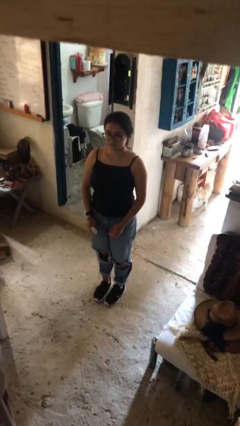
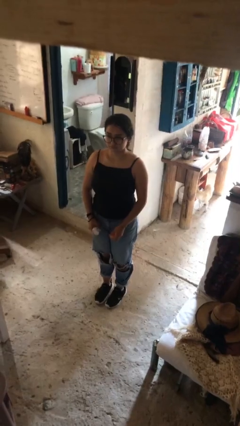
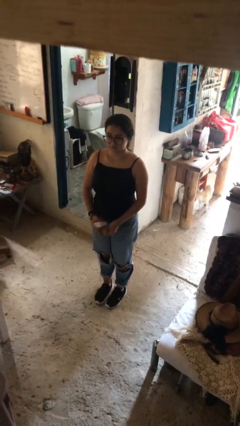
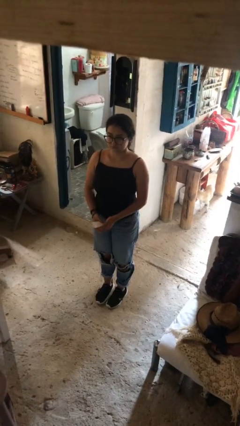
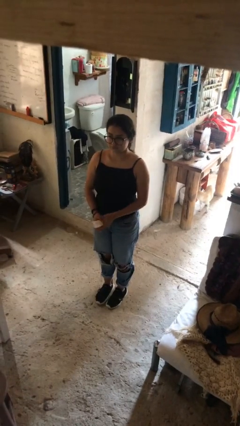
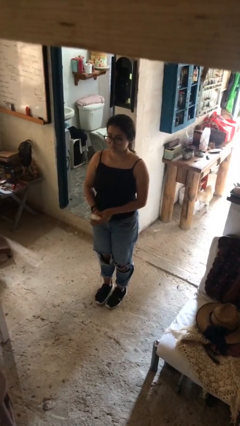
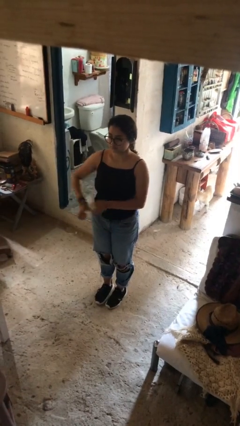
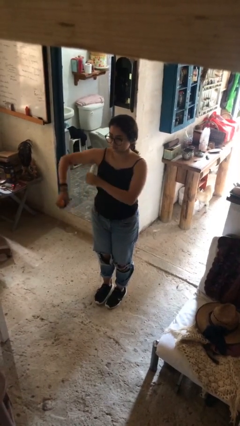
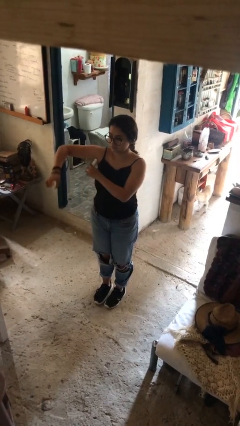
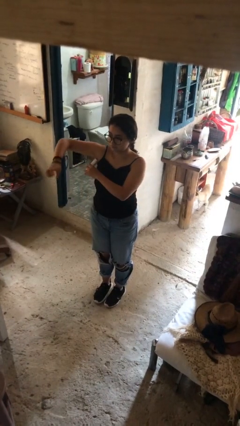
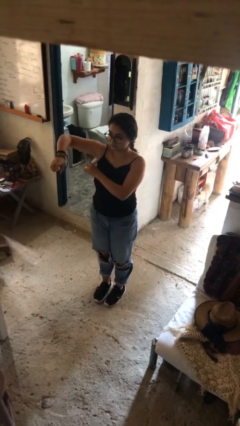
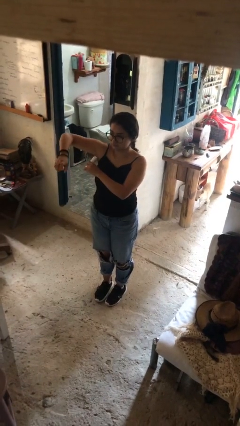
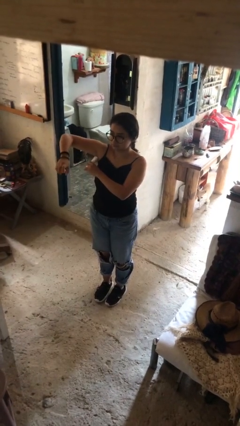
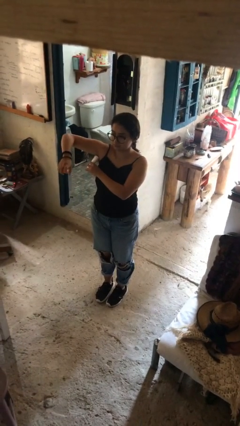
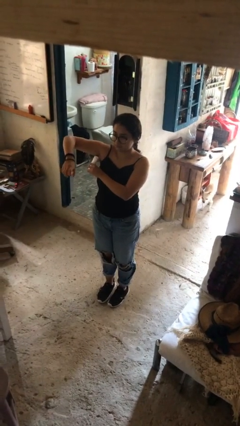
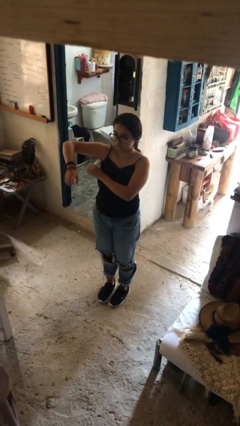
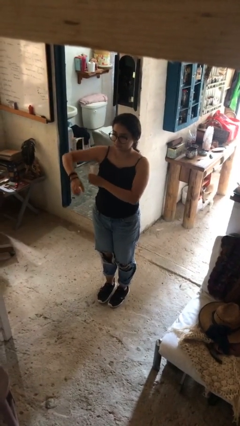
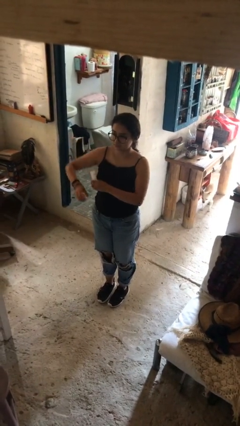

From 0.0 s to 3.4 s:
person applies deodorant

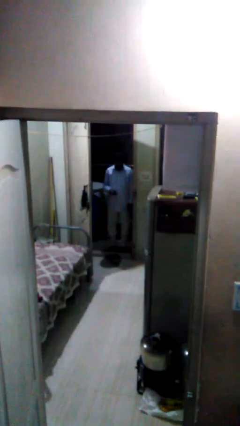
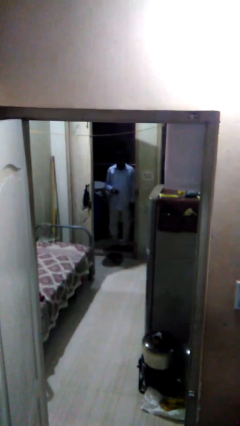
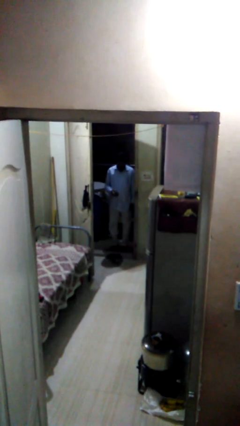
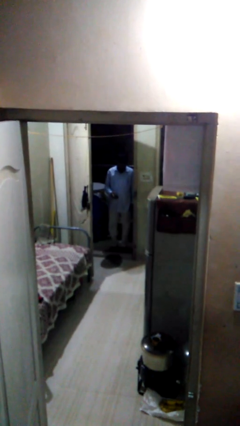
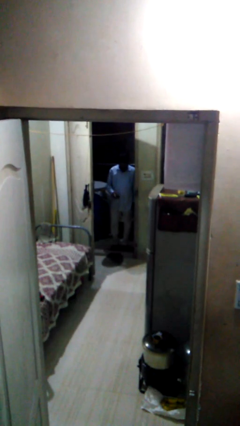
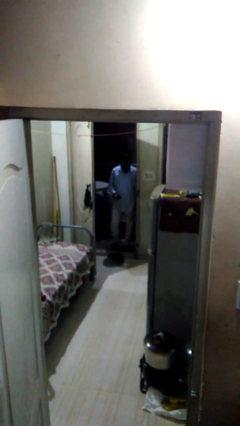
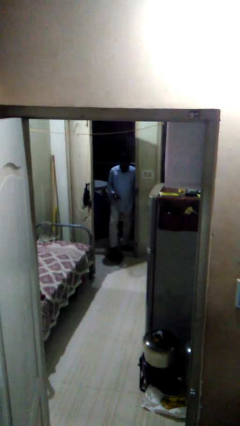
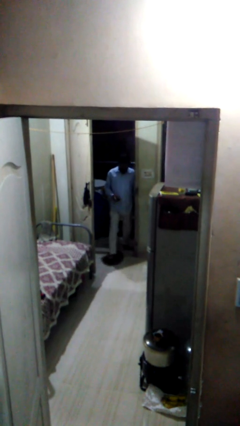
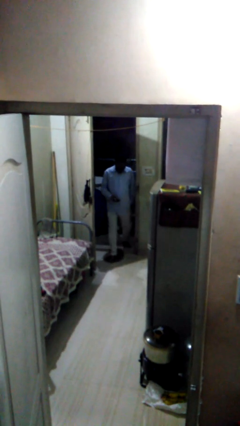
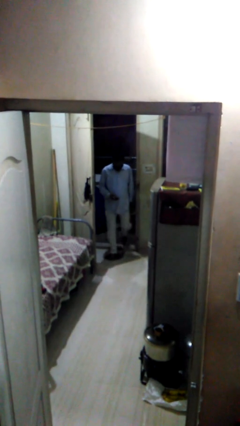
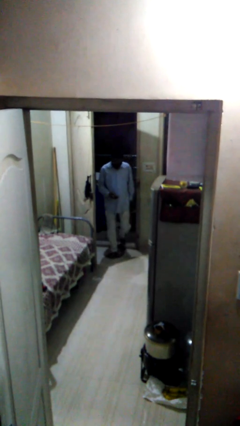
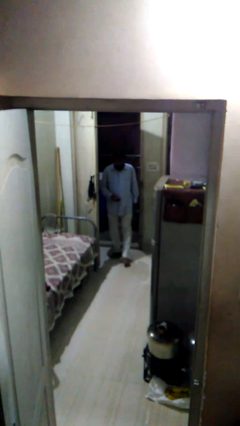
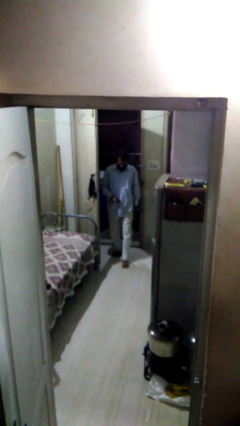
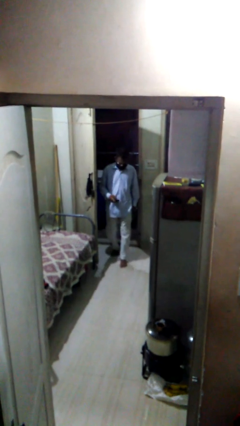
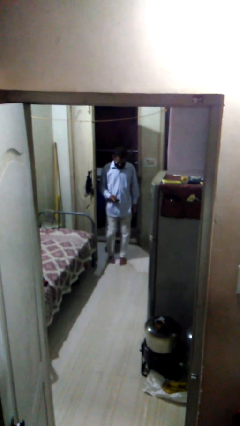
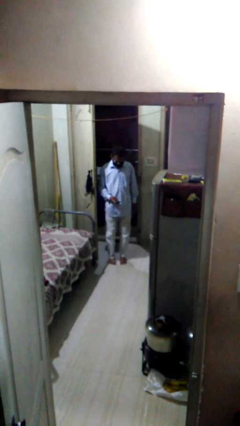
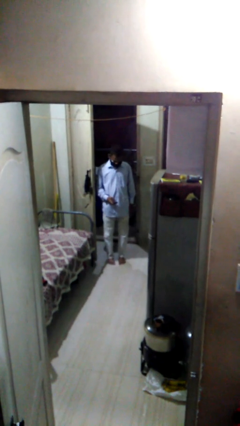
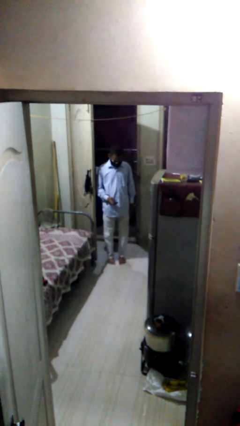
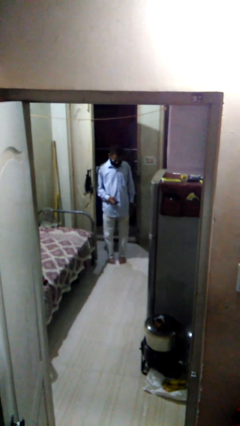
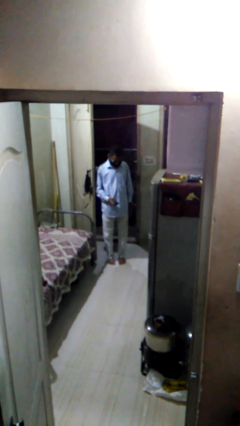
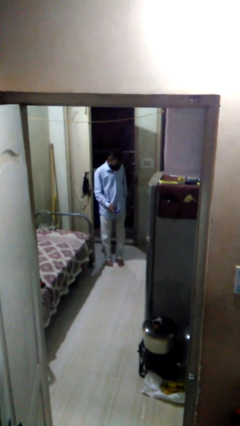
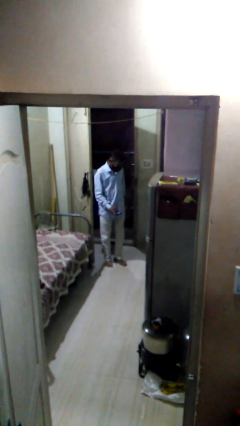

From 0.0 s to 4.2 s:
person enters scene through structure

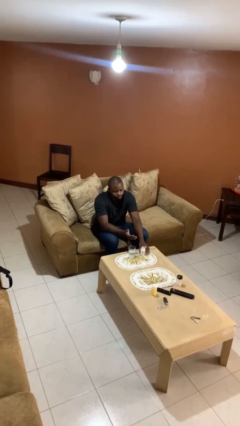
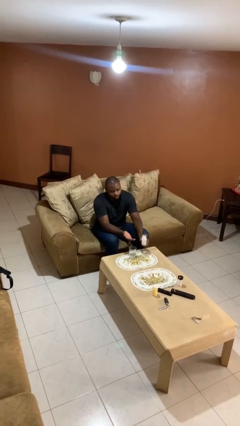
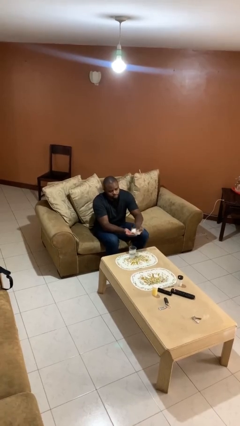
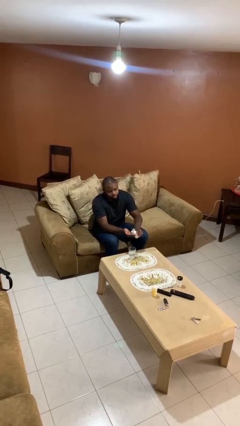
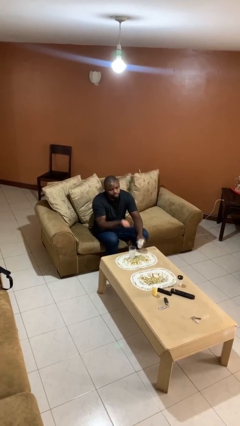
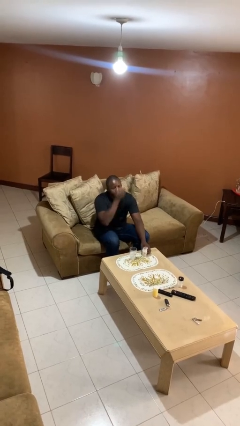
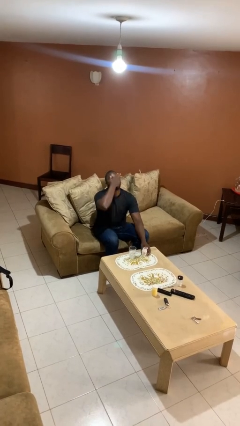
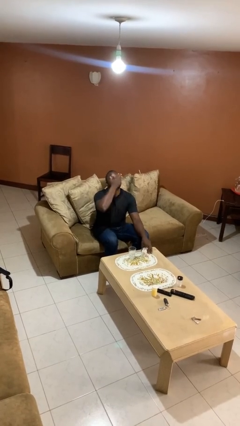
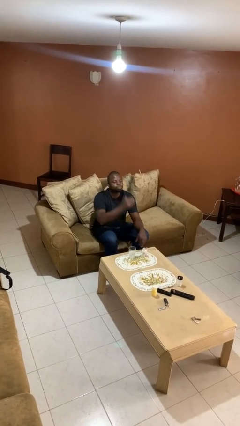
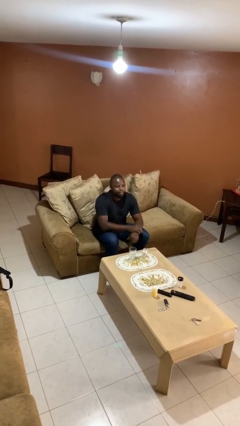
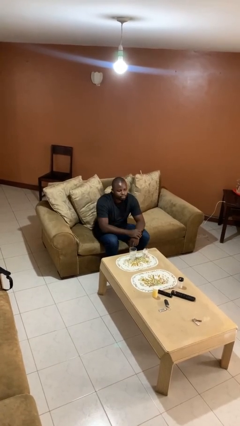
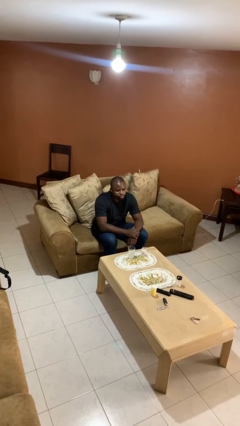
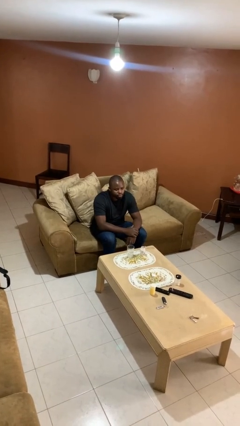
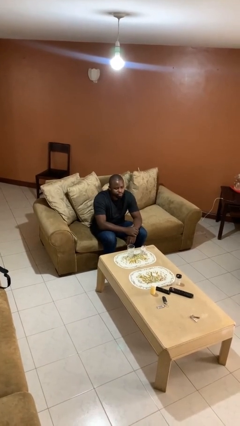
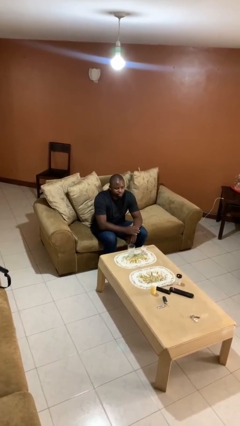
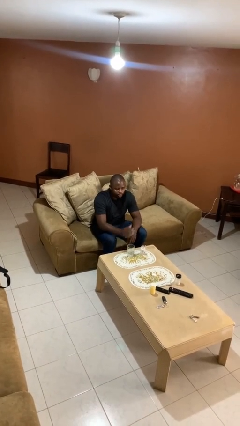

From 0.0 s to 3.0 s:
person takes medicine pills

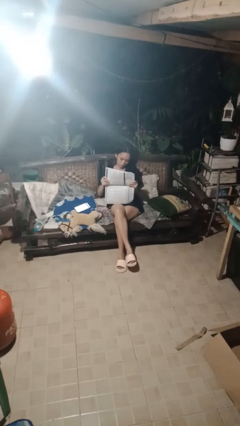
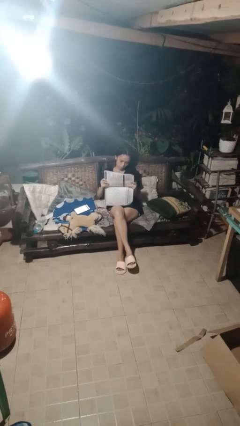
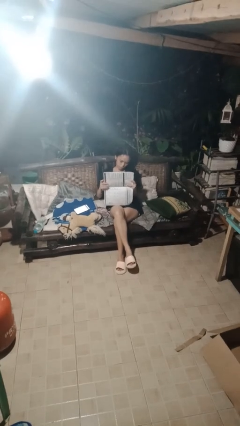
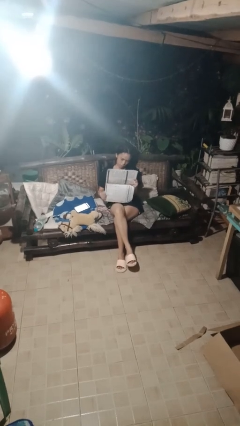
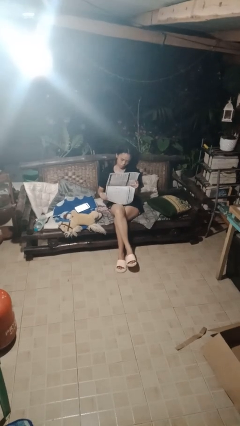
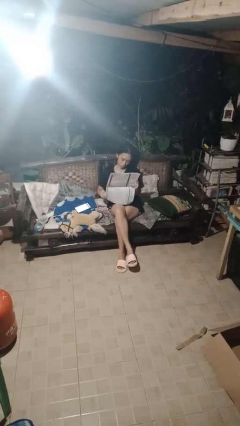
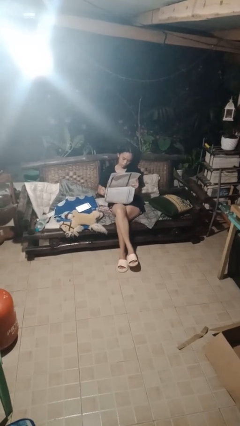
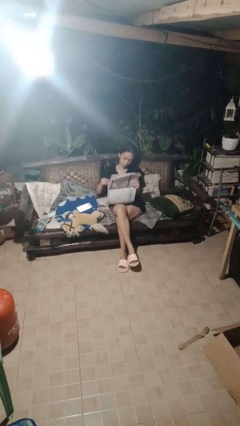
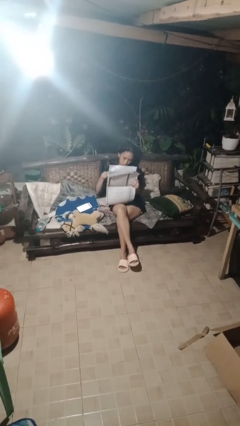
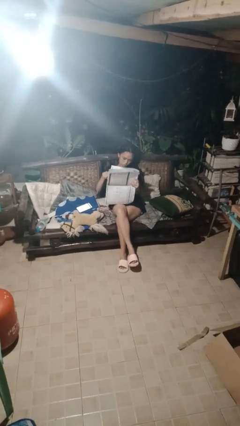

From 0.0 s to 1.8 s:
person reads newspaper

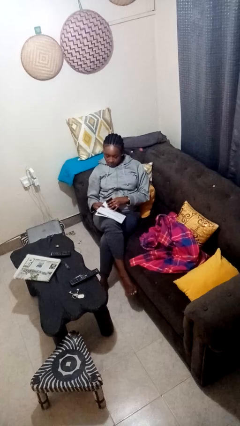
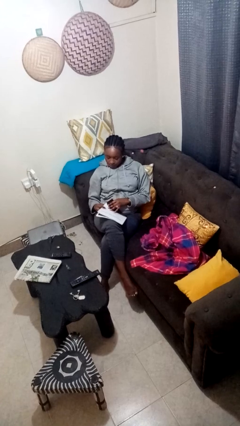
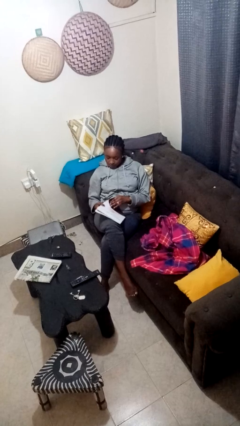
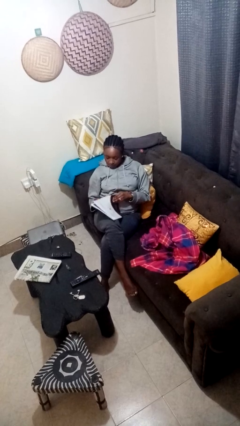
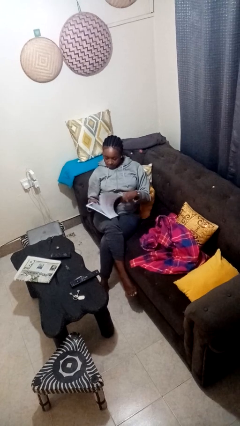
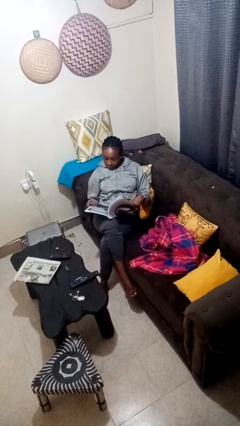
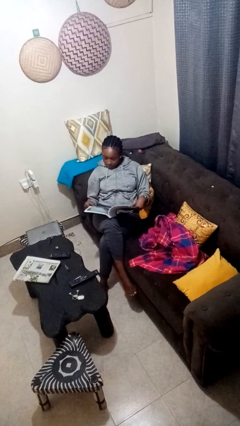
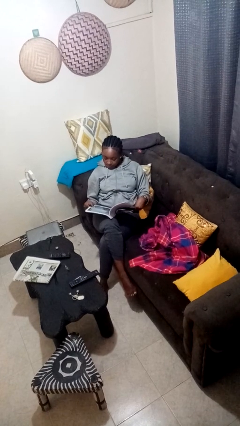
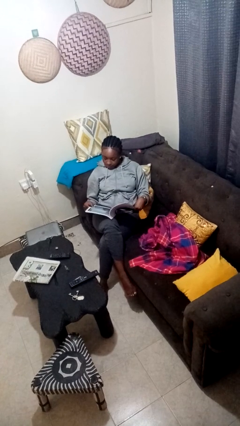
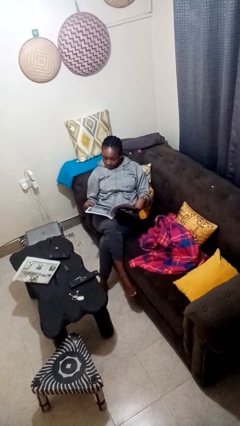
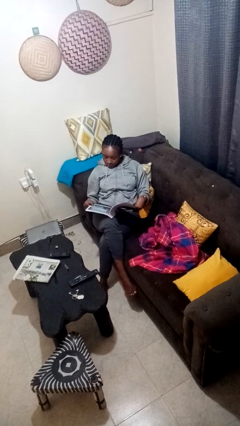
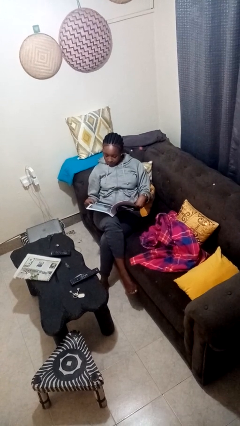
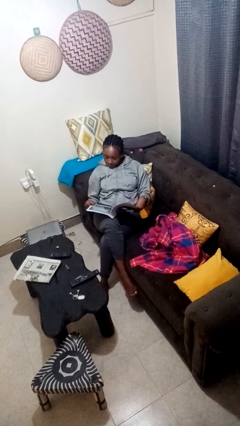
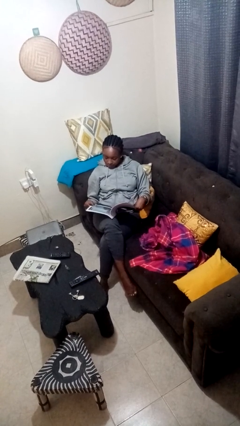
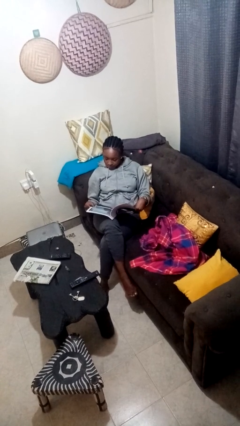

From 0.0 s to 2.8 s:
person reads magazine

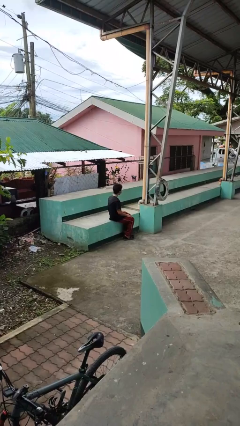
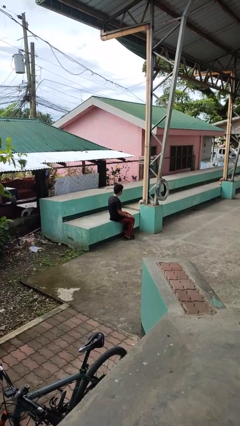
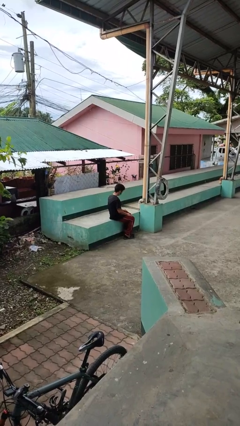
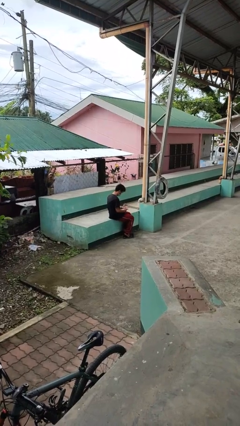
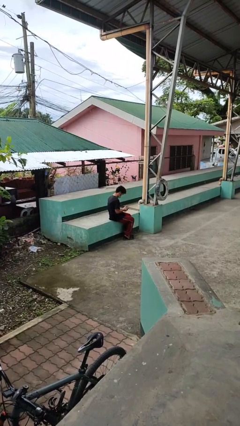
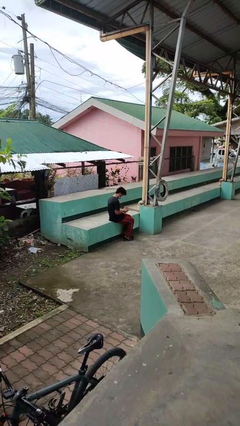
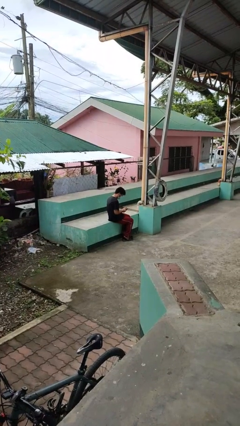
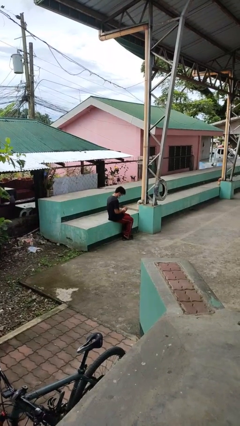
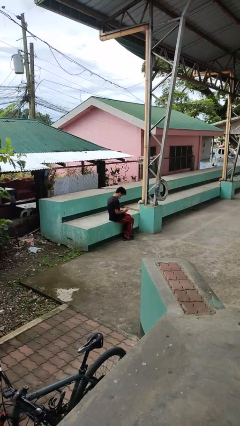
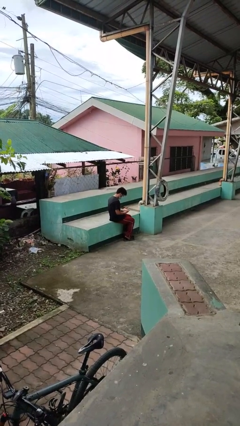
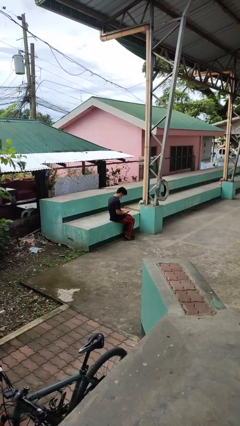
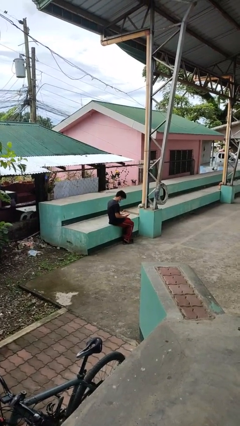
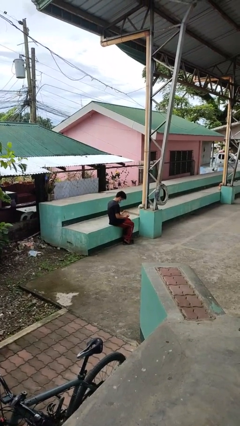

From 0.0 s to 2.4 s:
person looks at hands in lap
